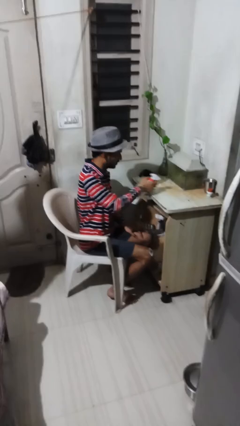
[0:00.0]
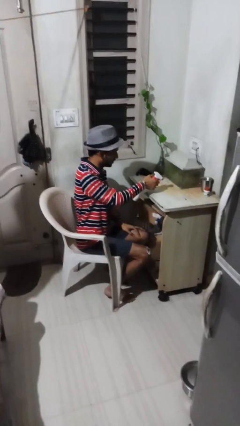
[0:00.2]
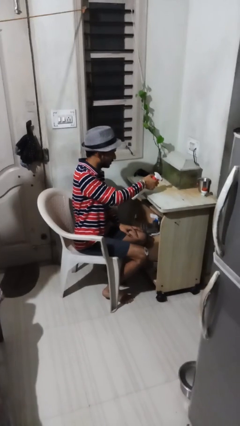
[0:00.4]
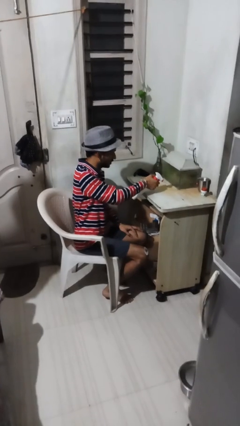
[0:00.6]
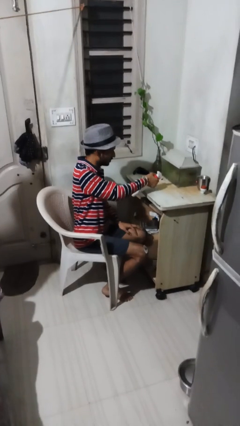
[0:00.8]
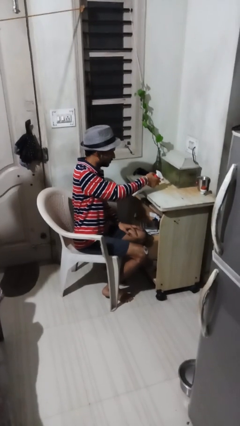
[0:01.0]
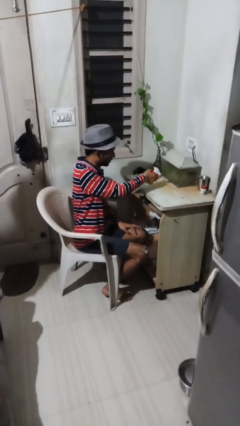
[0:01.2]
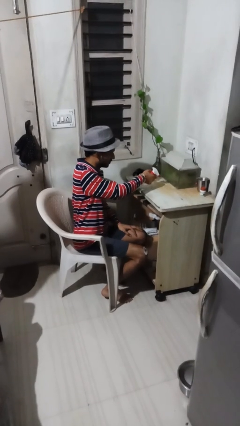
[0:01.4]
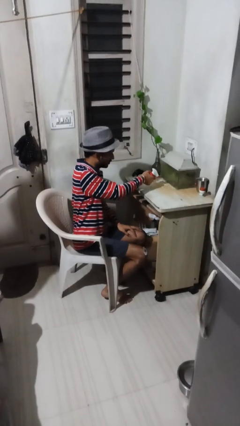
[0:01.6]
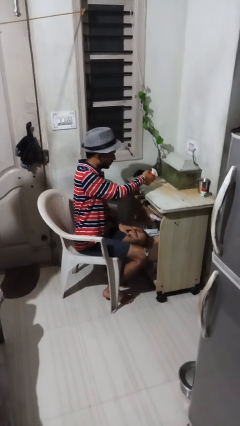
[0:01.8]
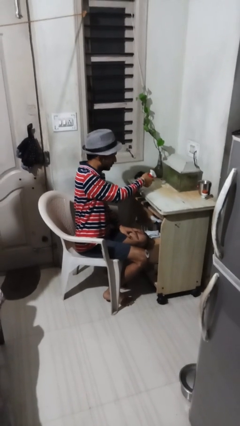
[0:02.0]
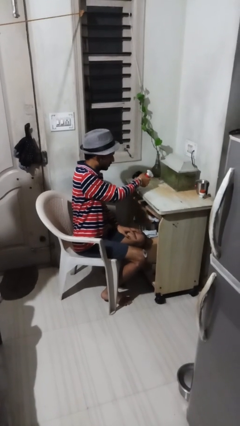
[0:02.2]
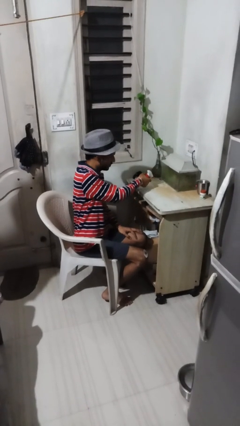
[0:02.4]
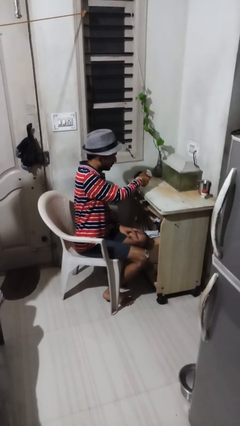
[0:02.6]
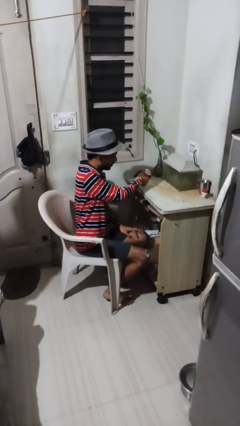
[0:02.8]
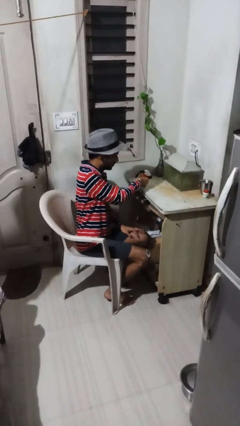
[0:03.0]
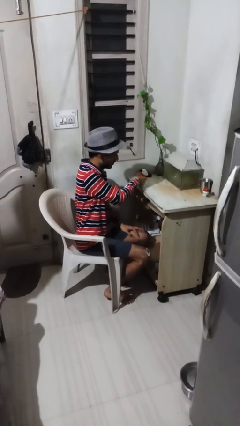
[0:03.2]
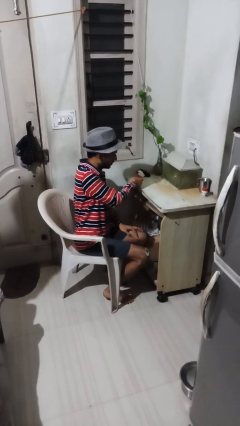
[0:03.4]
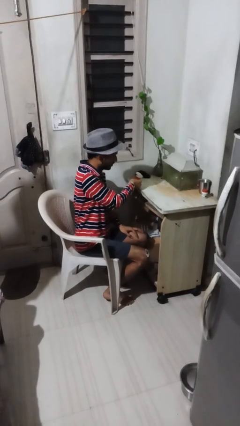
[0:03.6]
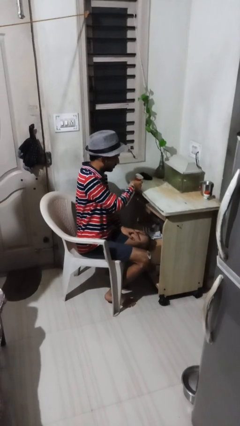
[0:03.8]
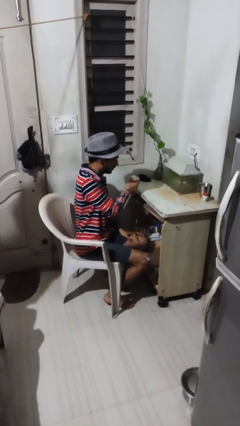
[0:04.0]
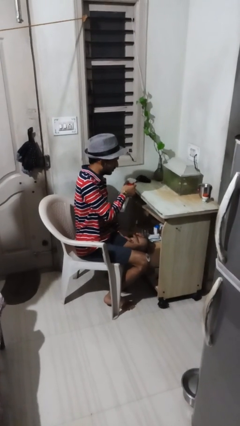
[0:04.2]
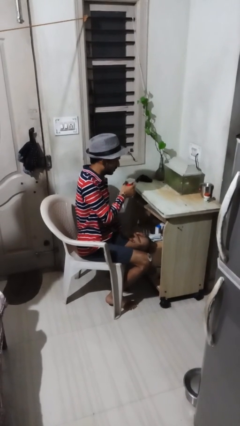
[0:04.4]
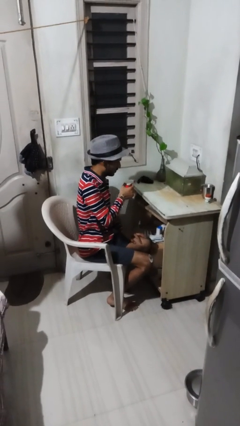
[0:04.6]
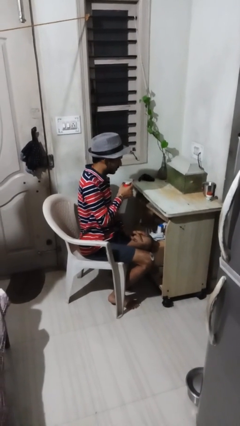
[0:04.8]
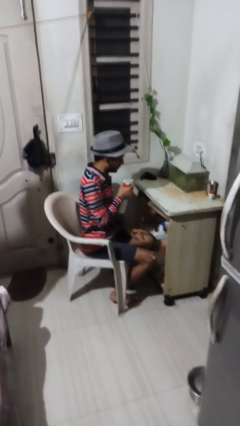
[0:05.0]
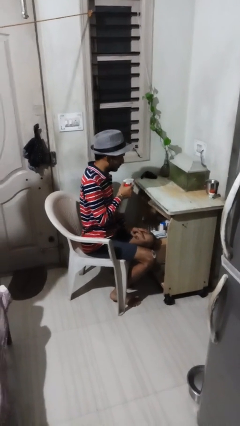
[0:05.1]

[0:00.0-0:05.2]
person sprays from bottle

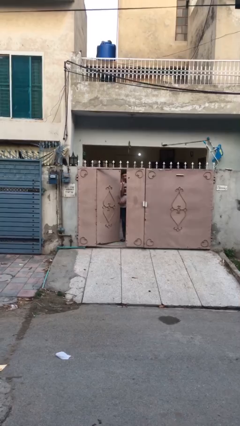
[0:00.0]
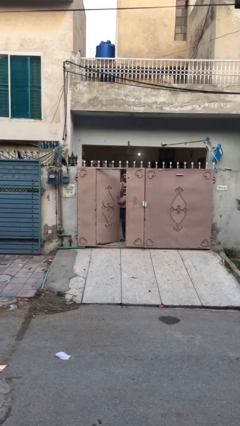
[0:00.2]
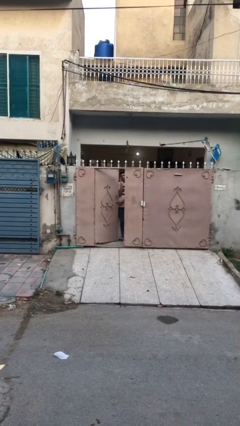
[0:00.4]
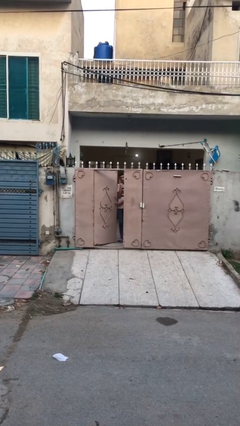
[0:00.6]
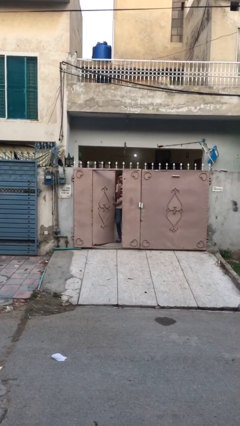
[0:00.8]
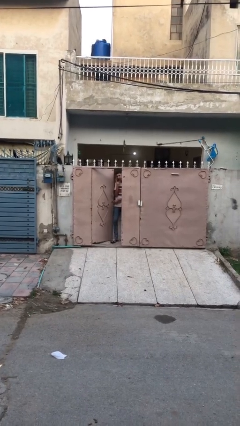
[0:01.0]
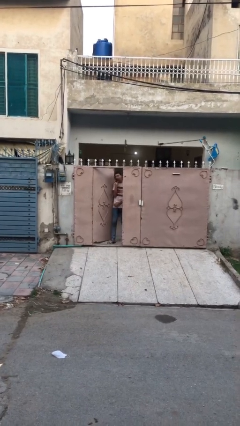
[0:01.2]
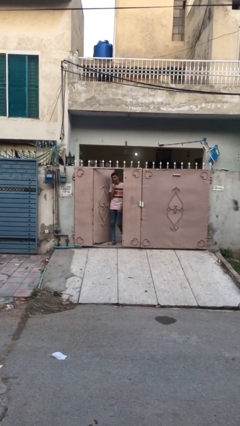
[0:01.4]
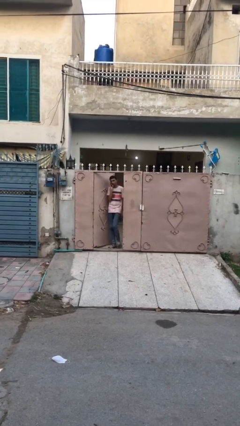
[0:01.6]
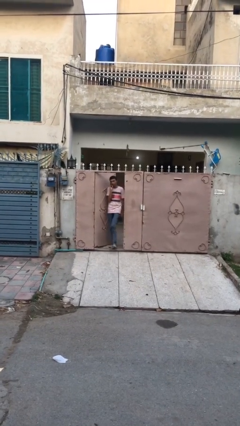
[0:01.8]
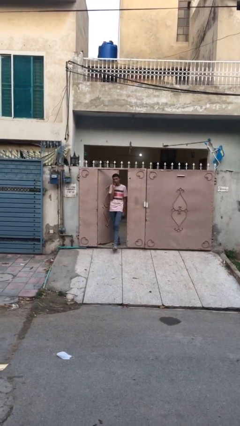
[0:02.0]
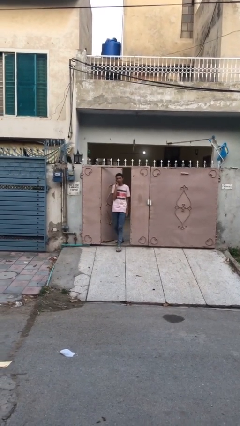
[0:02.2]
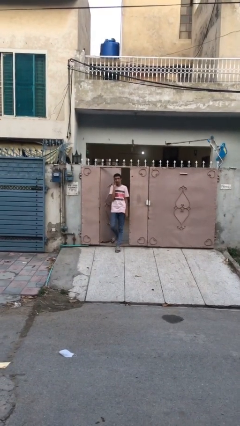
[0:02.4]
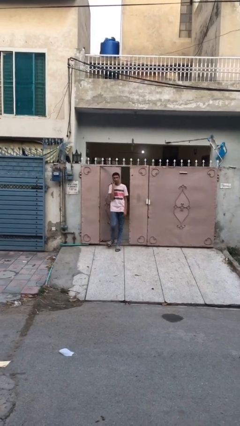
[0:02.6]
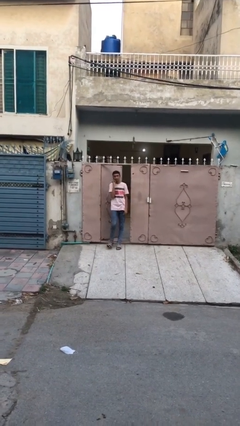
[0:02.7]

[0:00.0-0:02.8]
person enters scene through structure

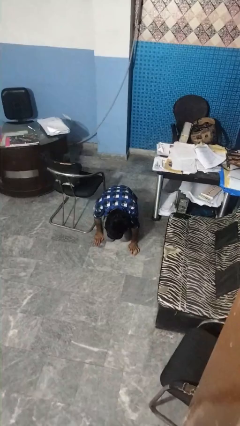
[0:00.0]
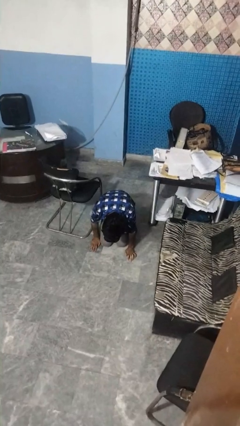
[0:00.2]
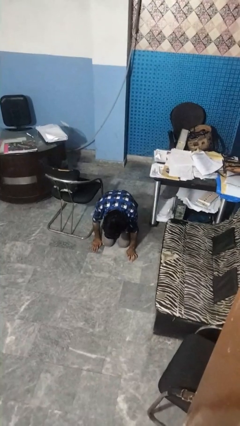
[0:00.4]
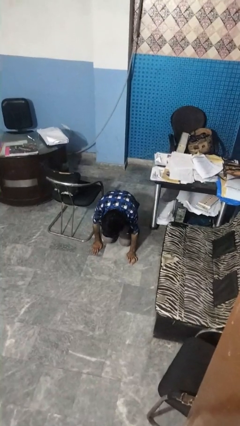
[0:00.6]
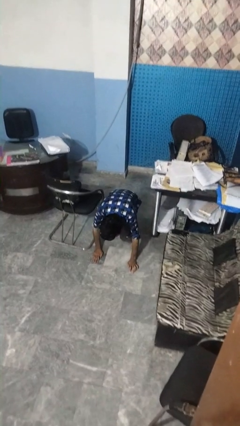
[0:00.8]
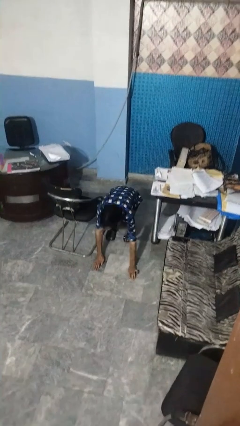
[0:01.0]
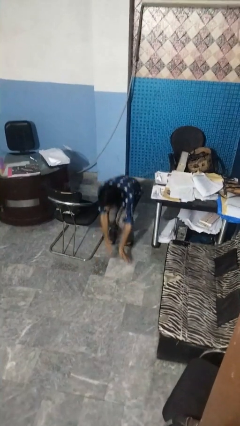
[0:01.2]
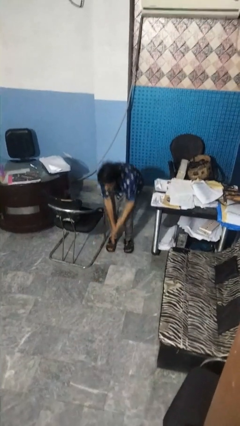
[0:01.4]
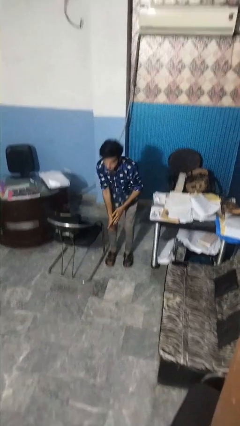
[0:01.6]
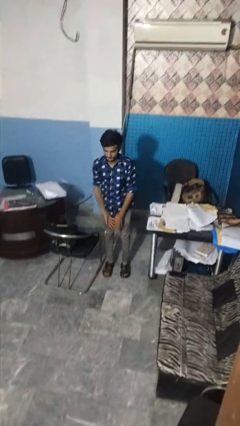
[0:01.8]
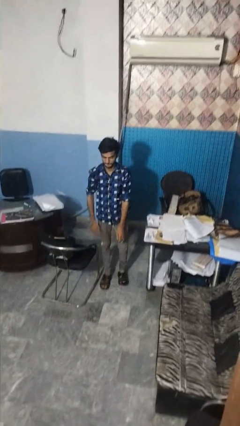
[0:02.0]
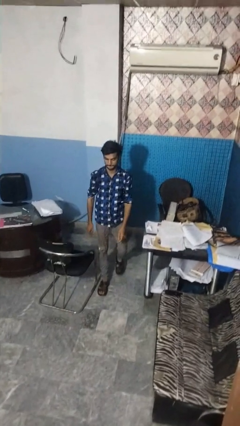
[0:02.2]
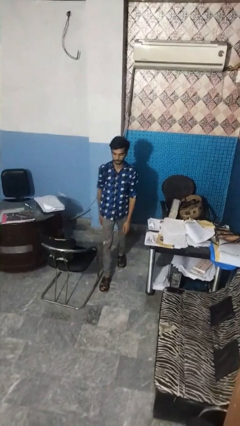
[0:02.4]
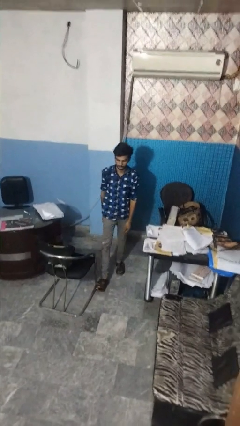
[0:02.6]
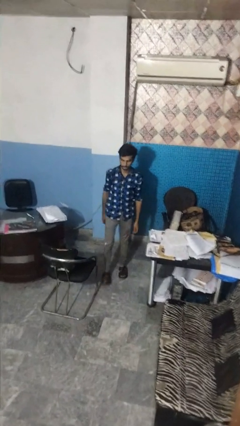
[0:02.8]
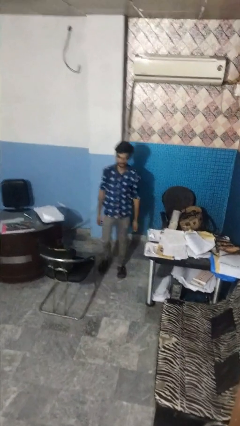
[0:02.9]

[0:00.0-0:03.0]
person stands up from floor

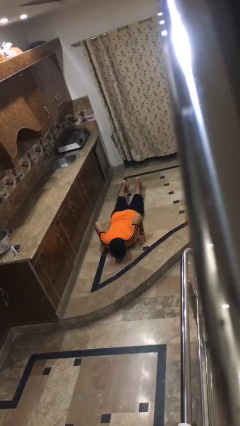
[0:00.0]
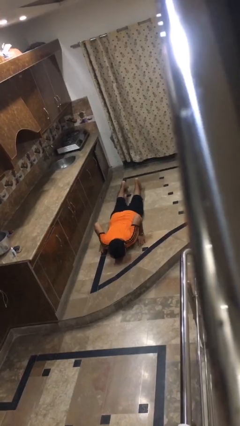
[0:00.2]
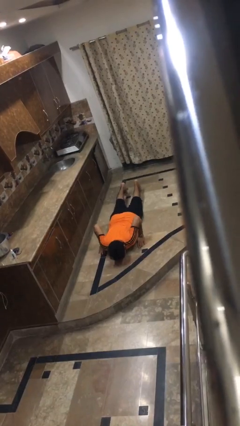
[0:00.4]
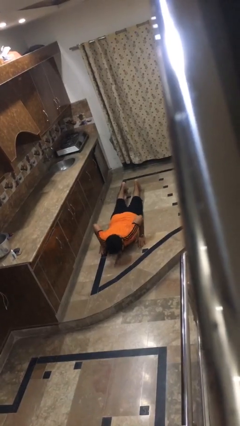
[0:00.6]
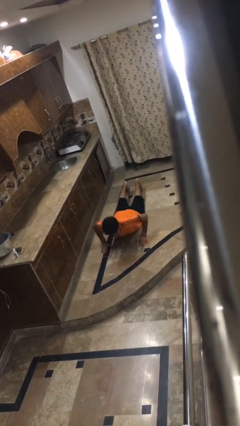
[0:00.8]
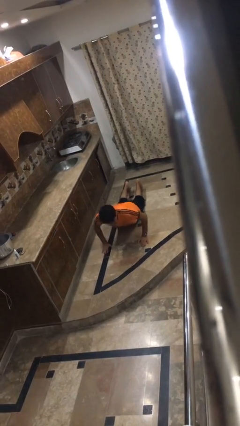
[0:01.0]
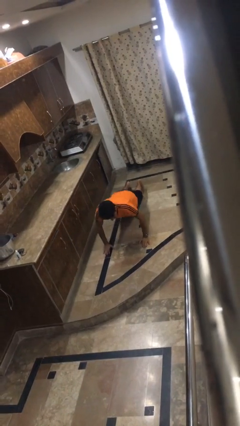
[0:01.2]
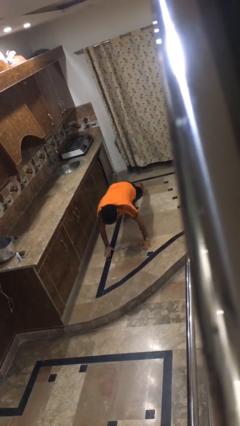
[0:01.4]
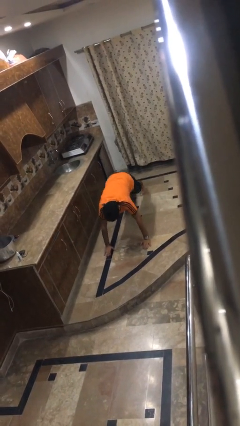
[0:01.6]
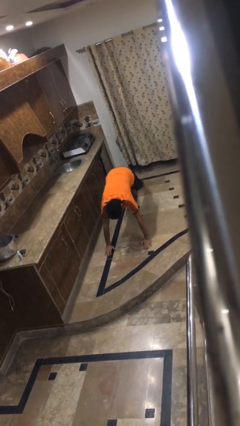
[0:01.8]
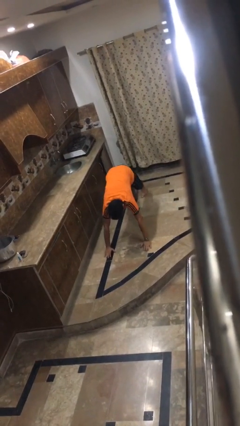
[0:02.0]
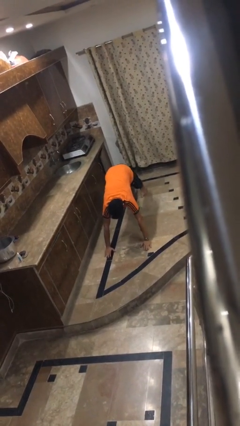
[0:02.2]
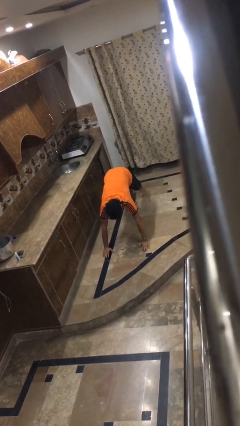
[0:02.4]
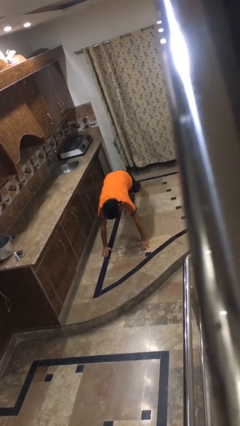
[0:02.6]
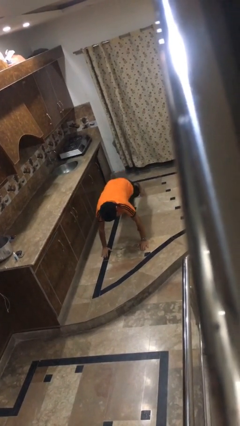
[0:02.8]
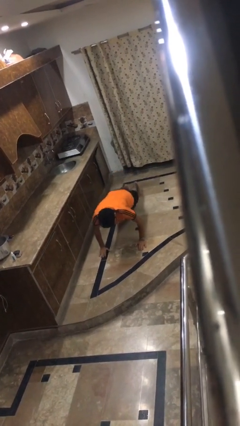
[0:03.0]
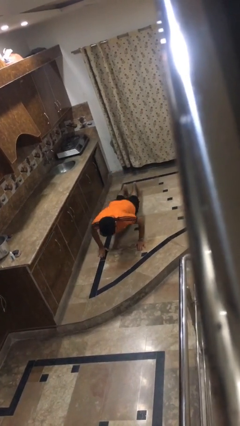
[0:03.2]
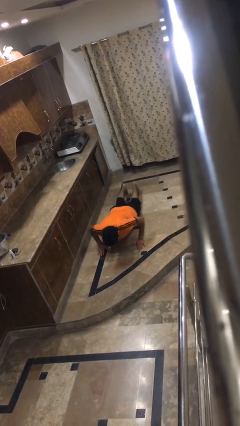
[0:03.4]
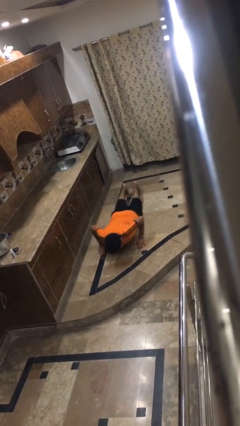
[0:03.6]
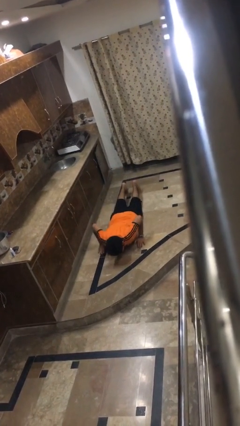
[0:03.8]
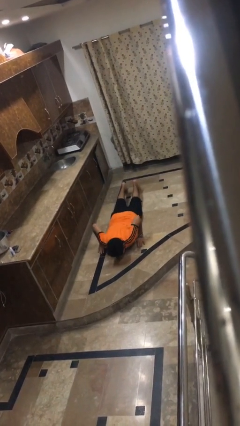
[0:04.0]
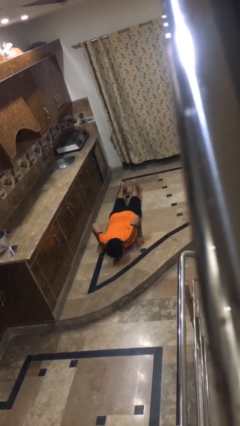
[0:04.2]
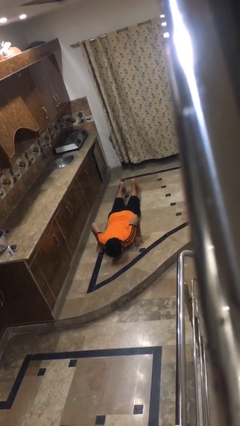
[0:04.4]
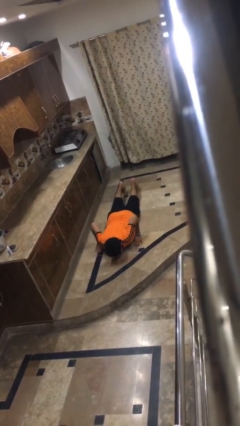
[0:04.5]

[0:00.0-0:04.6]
person exercises with pushup

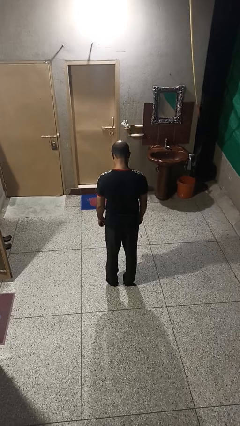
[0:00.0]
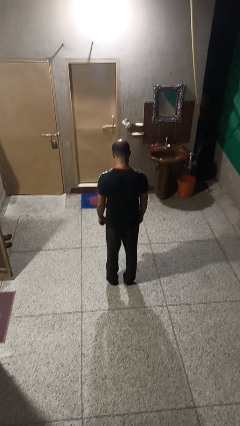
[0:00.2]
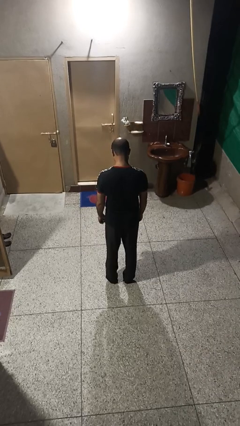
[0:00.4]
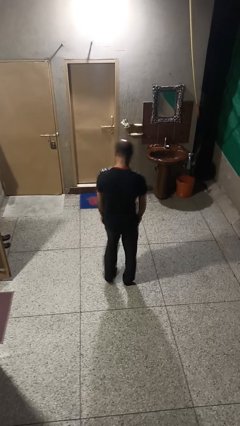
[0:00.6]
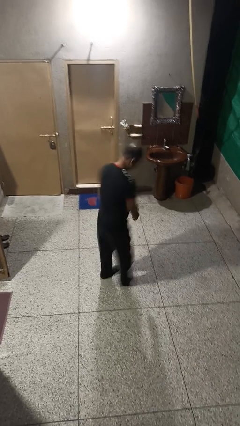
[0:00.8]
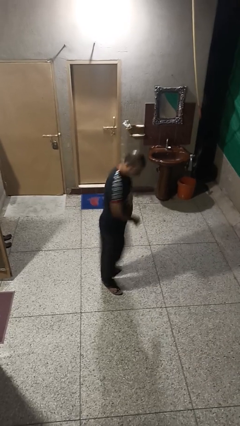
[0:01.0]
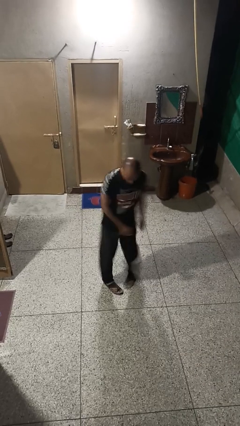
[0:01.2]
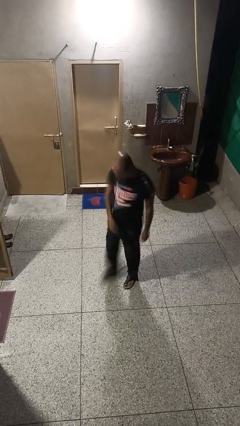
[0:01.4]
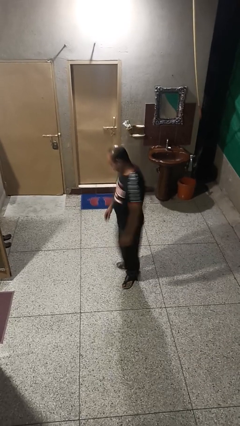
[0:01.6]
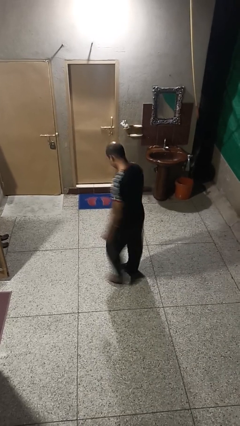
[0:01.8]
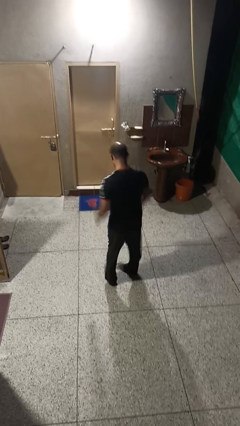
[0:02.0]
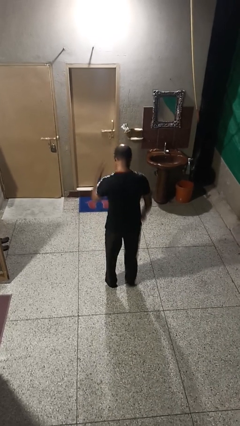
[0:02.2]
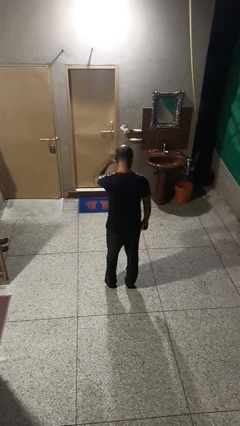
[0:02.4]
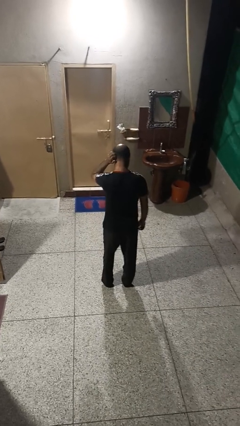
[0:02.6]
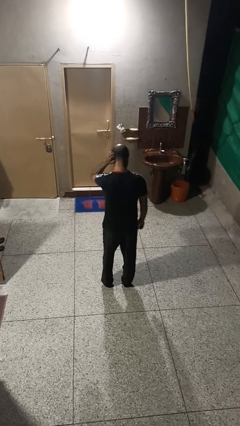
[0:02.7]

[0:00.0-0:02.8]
person twirls
